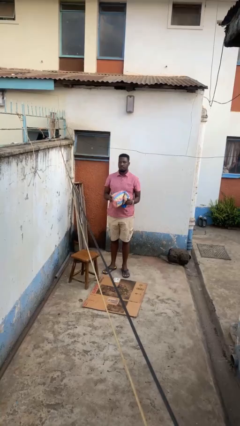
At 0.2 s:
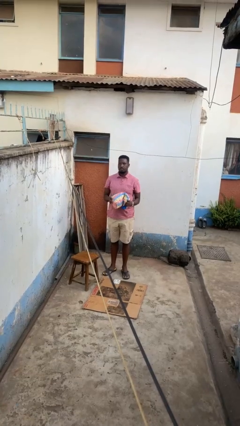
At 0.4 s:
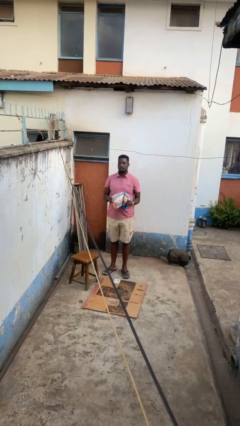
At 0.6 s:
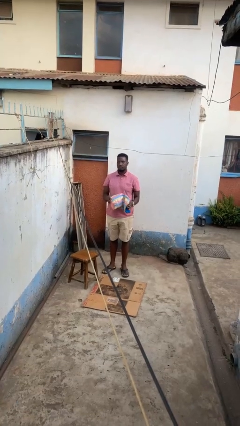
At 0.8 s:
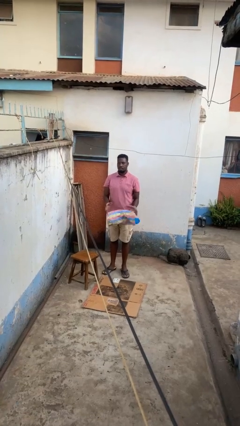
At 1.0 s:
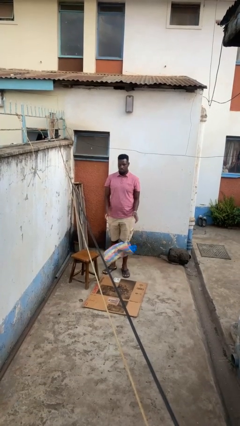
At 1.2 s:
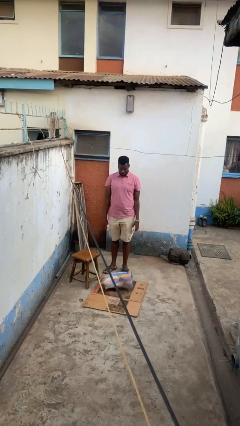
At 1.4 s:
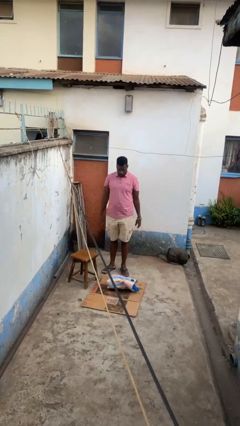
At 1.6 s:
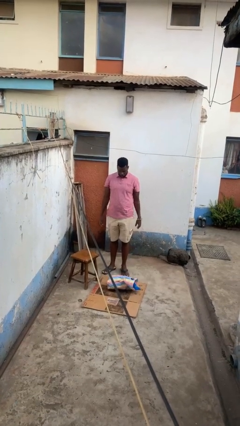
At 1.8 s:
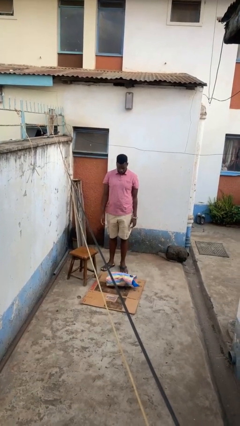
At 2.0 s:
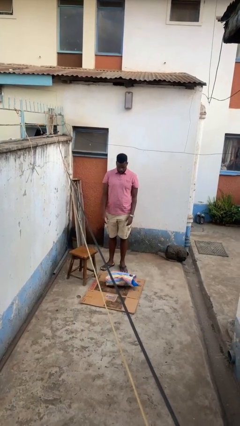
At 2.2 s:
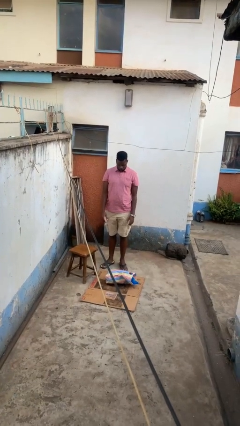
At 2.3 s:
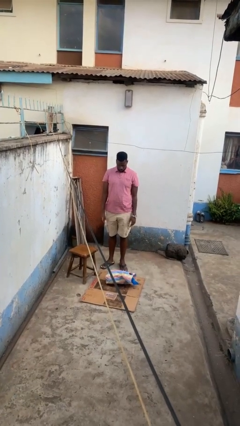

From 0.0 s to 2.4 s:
person drops object

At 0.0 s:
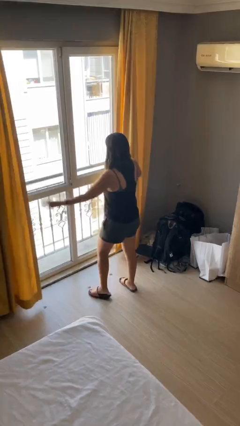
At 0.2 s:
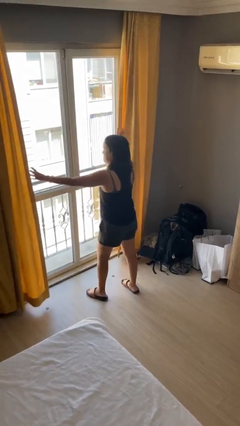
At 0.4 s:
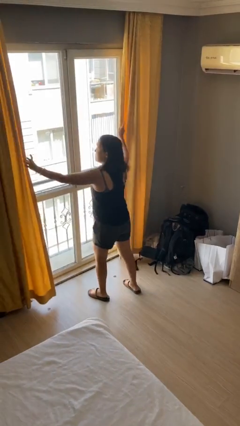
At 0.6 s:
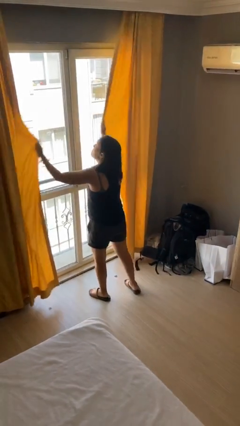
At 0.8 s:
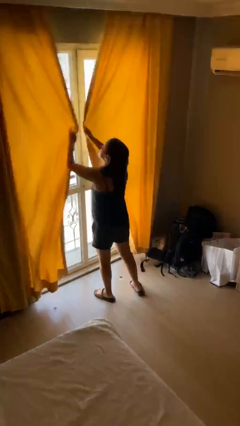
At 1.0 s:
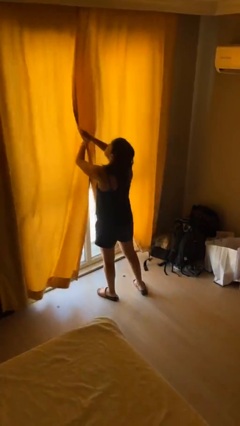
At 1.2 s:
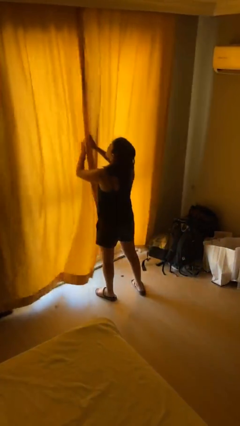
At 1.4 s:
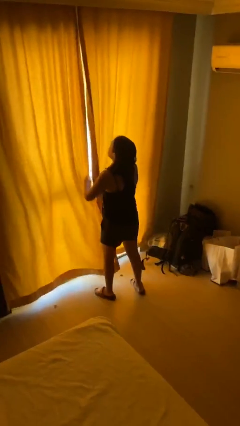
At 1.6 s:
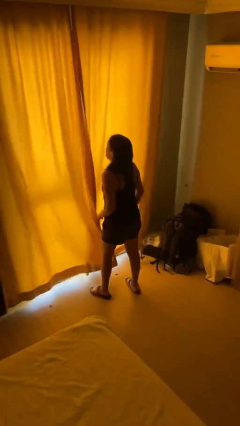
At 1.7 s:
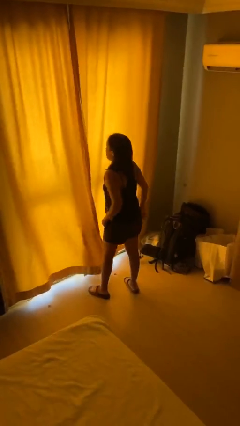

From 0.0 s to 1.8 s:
person closes curtains

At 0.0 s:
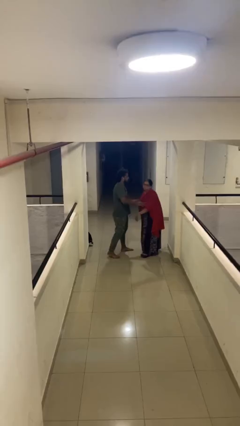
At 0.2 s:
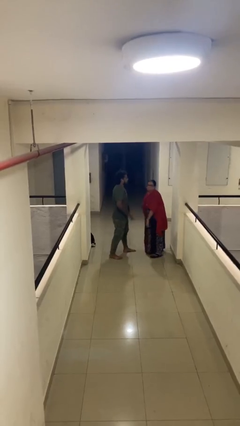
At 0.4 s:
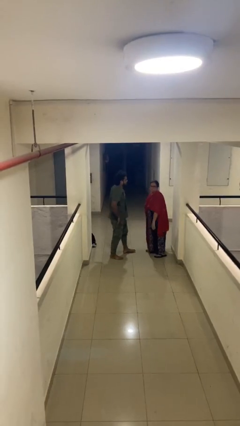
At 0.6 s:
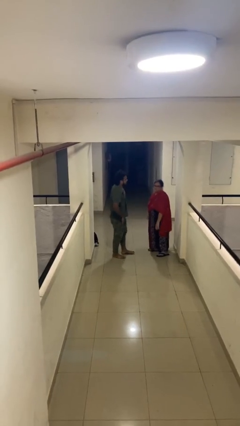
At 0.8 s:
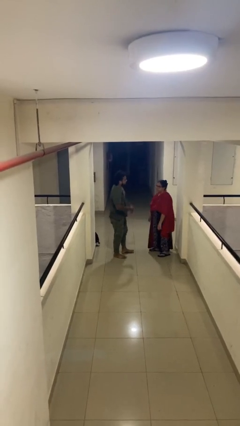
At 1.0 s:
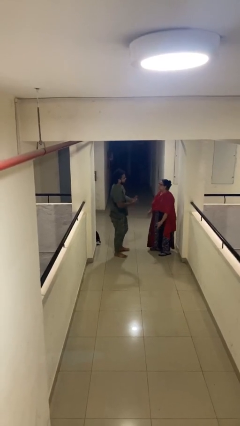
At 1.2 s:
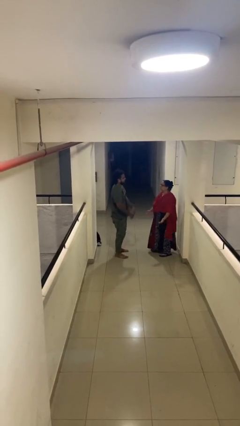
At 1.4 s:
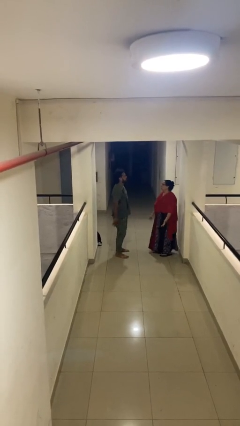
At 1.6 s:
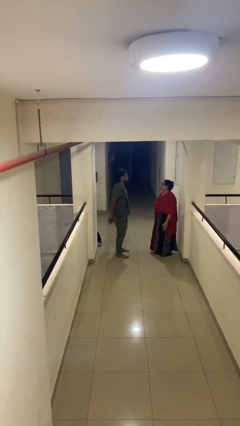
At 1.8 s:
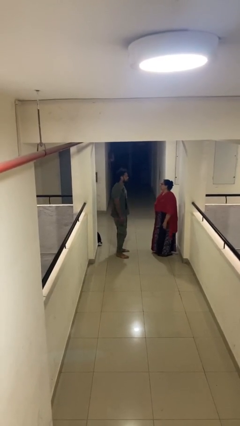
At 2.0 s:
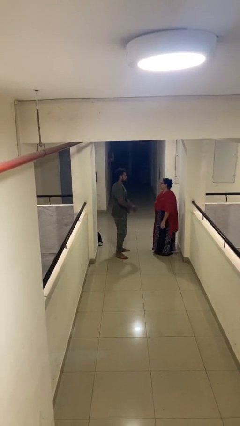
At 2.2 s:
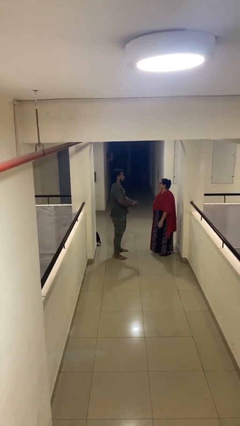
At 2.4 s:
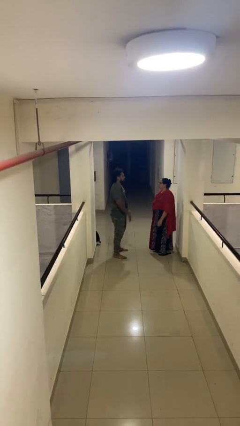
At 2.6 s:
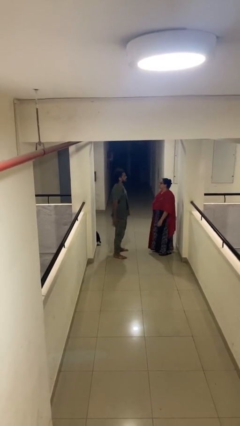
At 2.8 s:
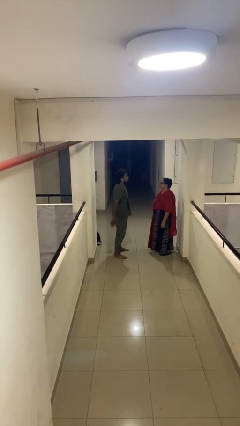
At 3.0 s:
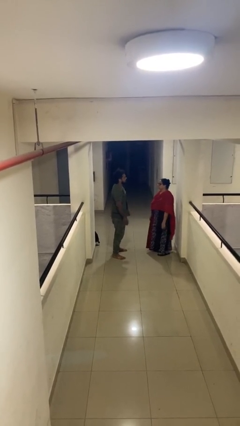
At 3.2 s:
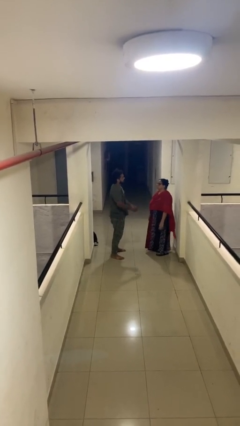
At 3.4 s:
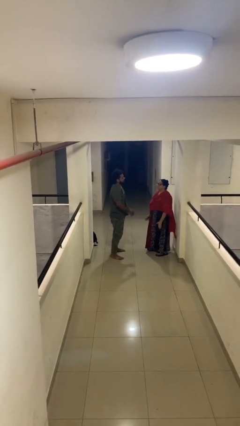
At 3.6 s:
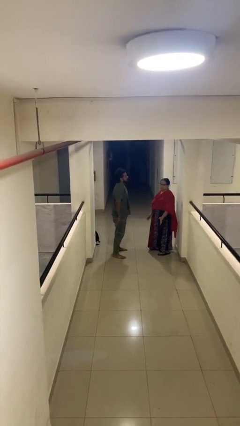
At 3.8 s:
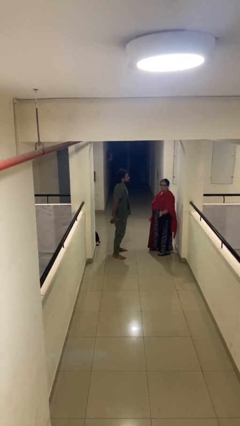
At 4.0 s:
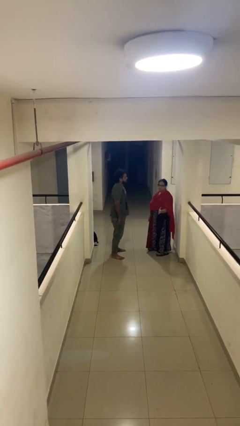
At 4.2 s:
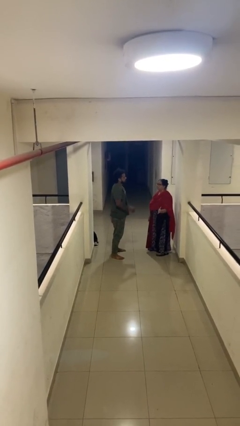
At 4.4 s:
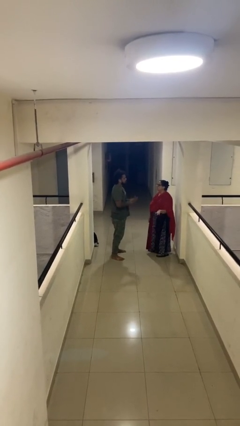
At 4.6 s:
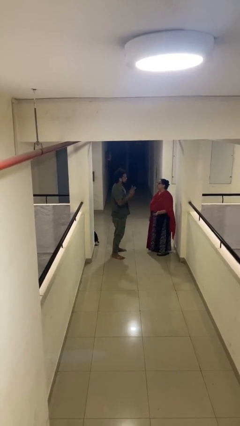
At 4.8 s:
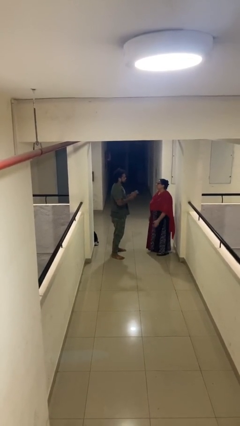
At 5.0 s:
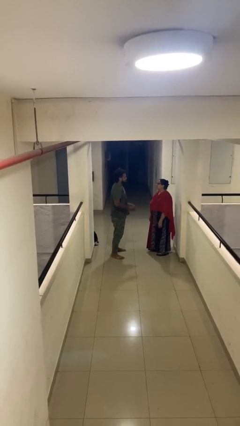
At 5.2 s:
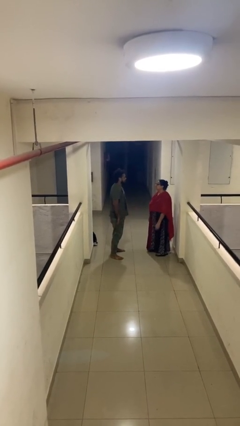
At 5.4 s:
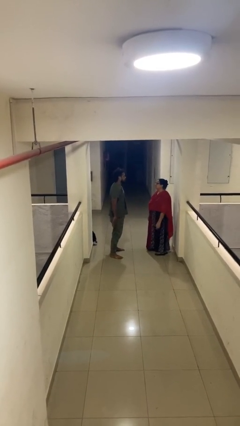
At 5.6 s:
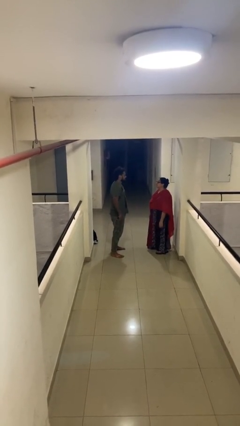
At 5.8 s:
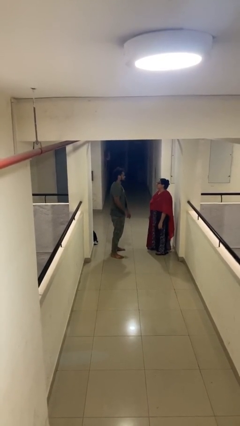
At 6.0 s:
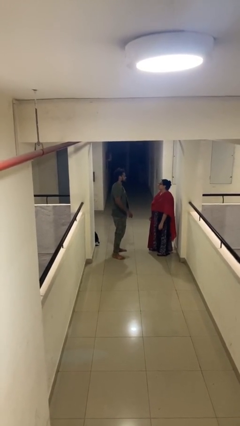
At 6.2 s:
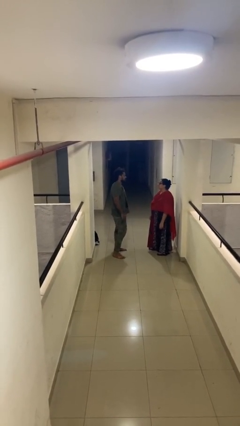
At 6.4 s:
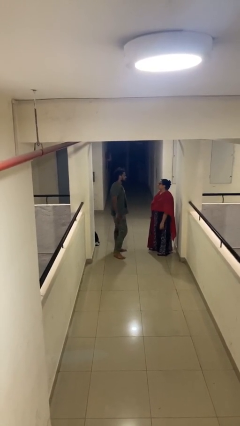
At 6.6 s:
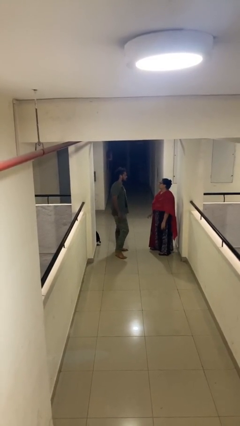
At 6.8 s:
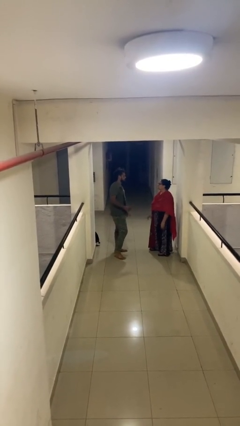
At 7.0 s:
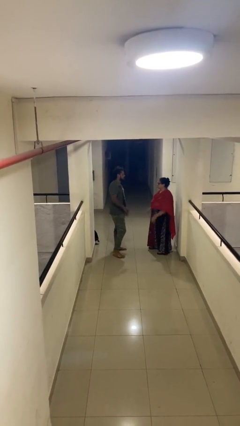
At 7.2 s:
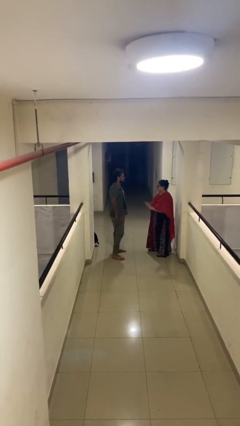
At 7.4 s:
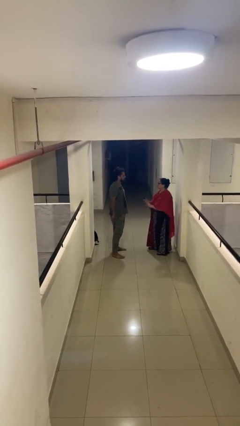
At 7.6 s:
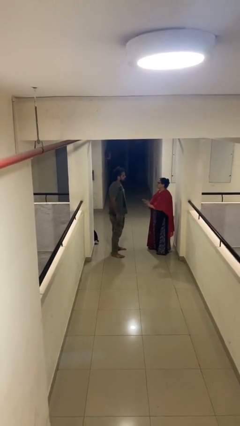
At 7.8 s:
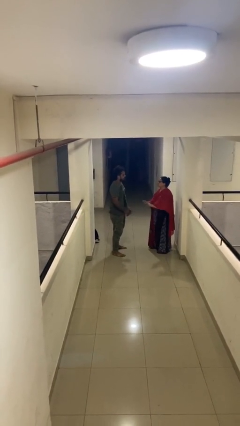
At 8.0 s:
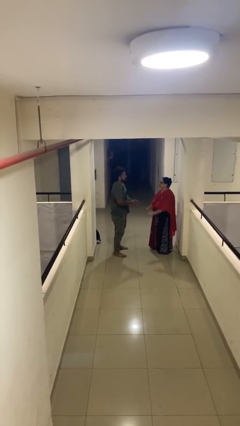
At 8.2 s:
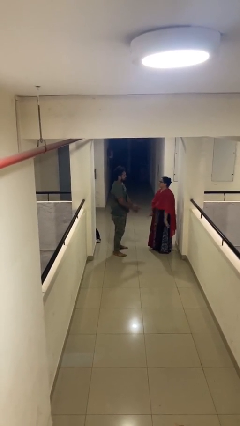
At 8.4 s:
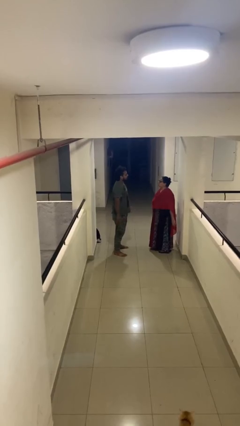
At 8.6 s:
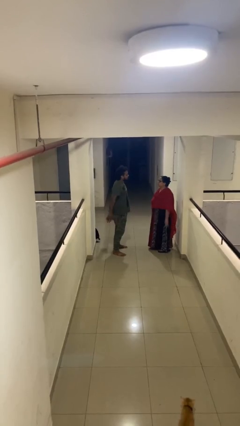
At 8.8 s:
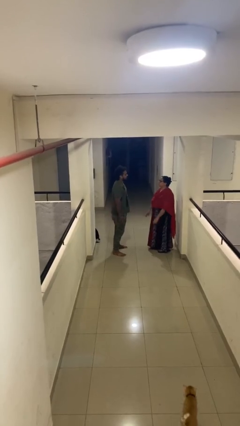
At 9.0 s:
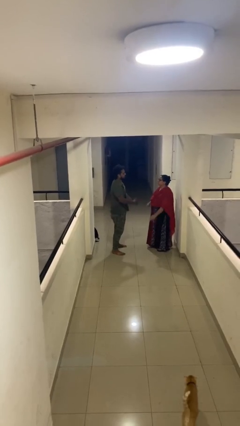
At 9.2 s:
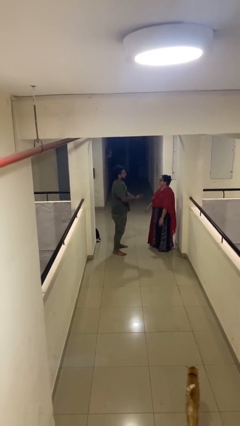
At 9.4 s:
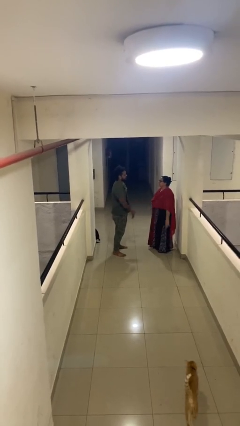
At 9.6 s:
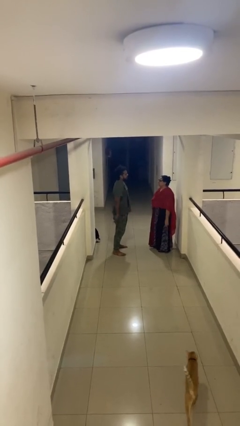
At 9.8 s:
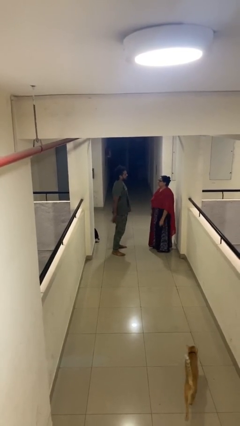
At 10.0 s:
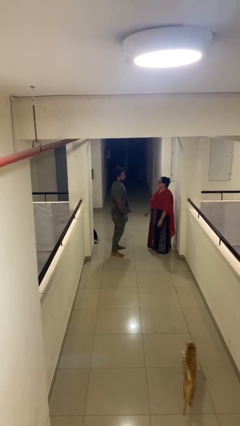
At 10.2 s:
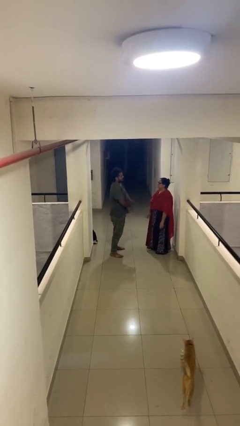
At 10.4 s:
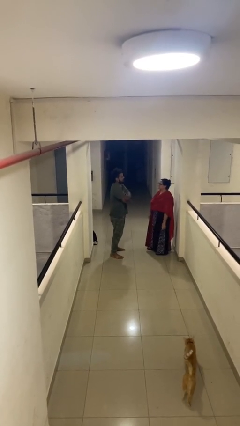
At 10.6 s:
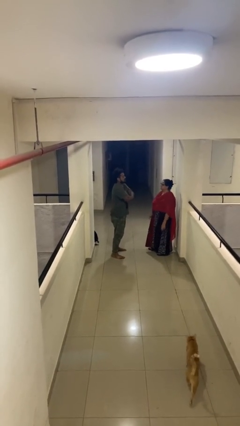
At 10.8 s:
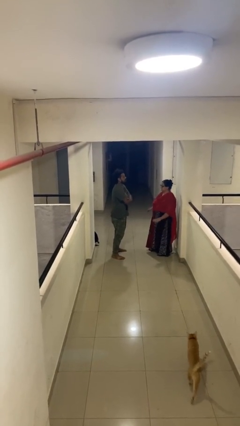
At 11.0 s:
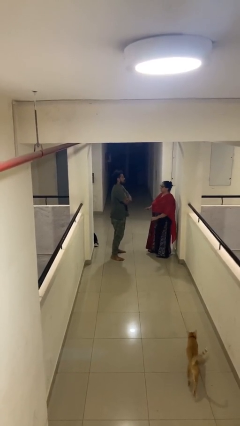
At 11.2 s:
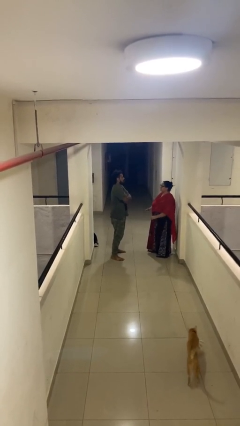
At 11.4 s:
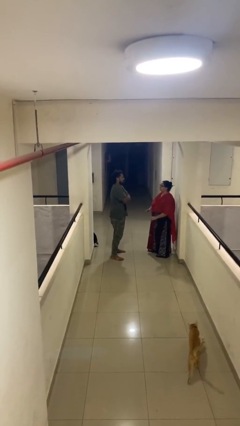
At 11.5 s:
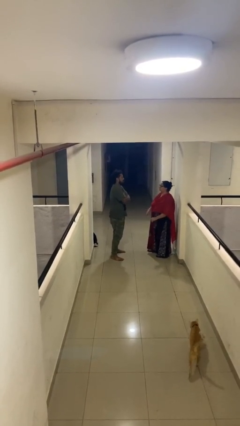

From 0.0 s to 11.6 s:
person talks to person

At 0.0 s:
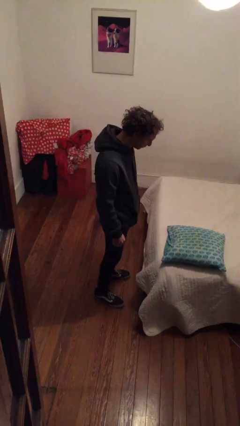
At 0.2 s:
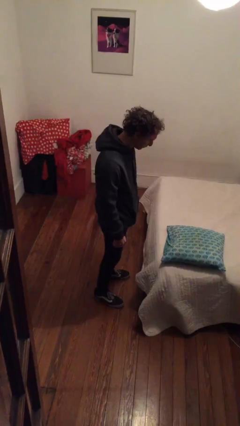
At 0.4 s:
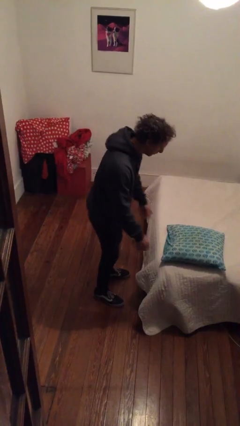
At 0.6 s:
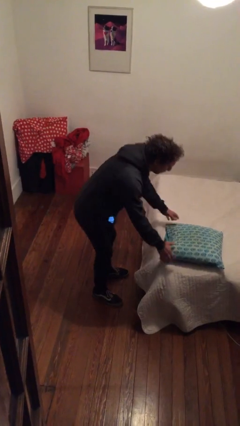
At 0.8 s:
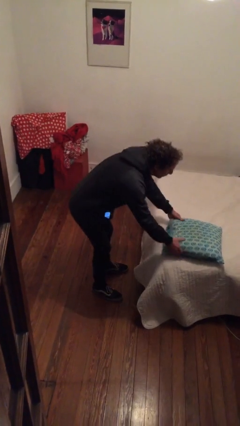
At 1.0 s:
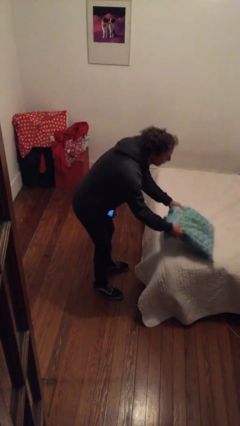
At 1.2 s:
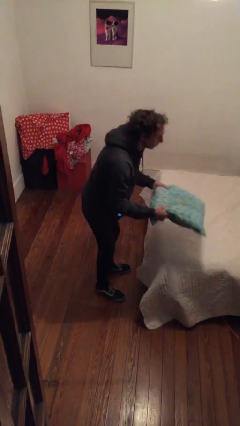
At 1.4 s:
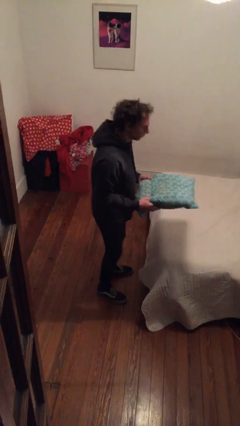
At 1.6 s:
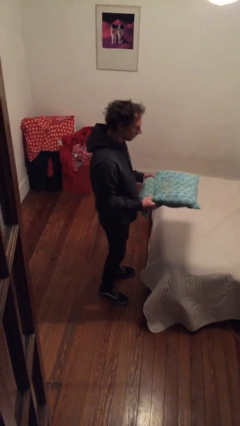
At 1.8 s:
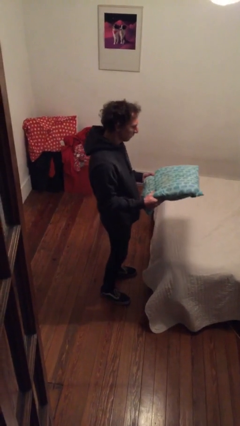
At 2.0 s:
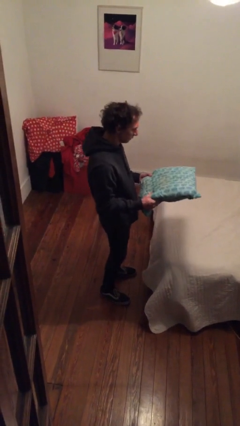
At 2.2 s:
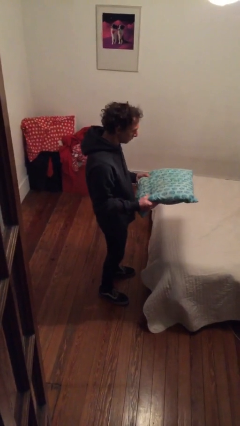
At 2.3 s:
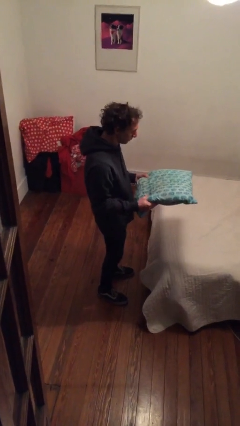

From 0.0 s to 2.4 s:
person picks up object from bed
